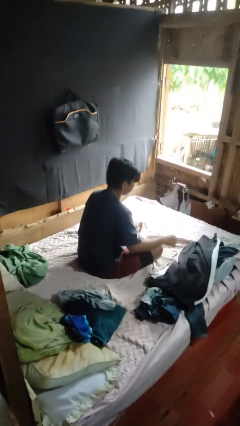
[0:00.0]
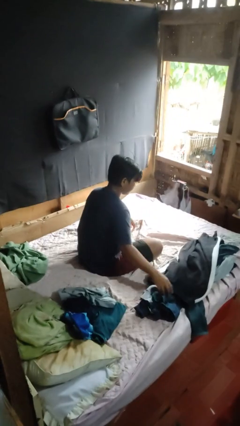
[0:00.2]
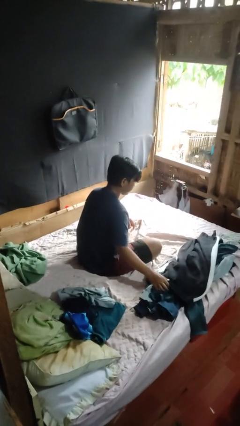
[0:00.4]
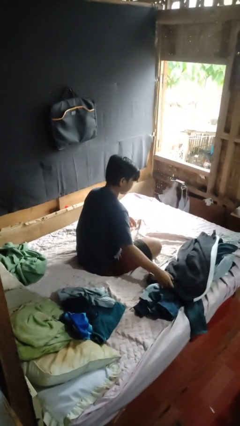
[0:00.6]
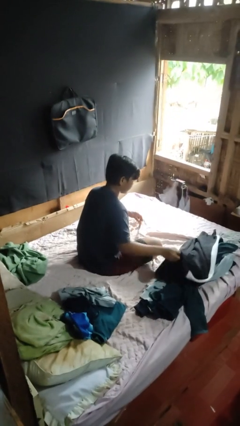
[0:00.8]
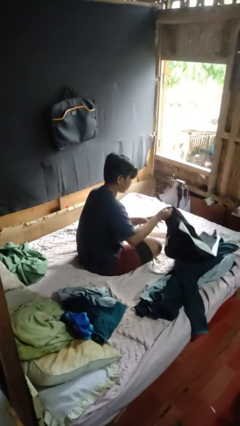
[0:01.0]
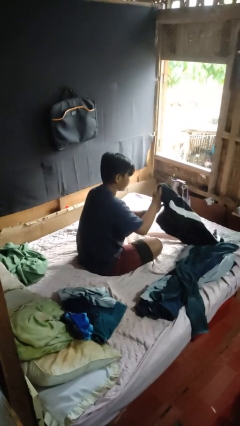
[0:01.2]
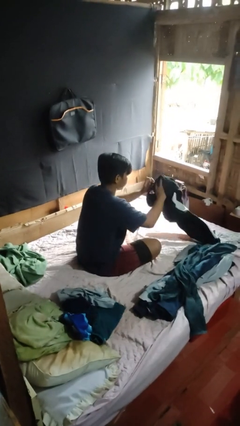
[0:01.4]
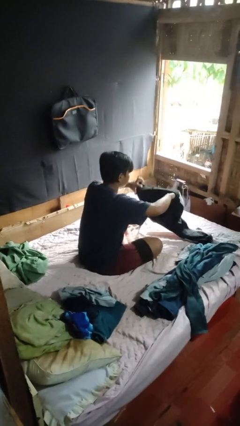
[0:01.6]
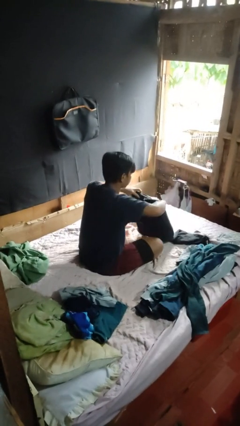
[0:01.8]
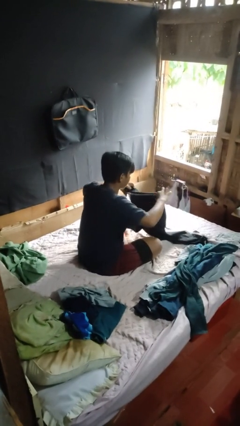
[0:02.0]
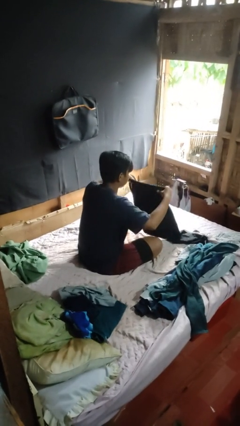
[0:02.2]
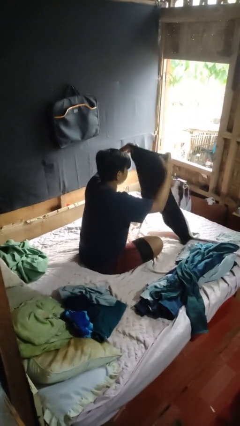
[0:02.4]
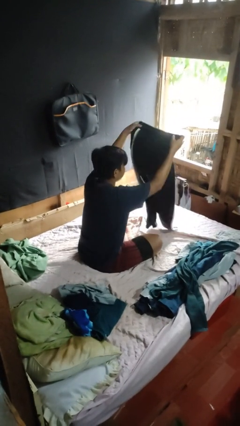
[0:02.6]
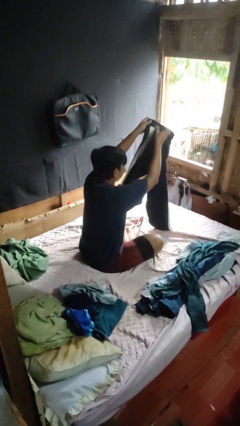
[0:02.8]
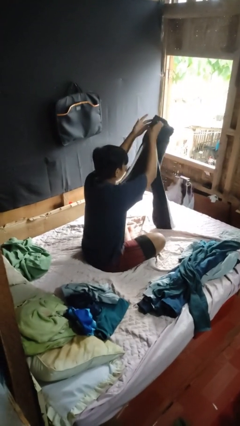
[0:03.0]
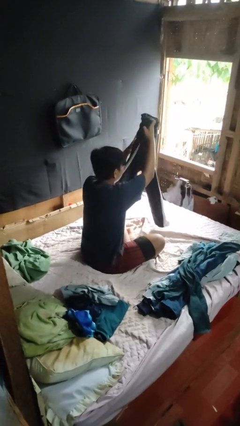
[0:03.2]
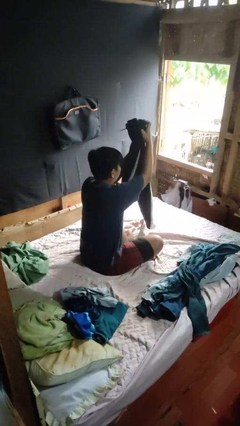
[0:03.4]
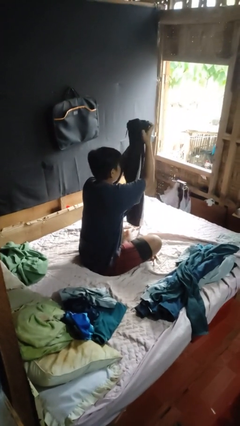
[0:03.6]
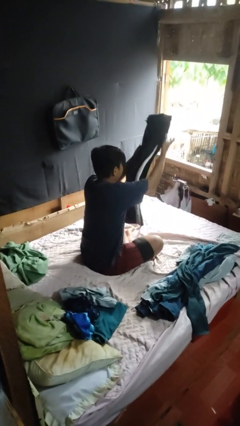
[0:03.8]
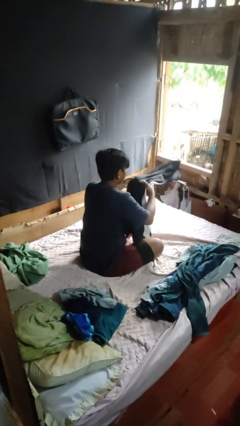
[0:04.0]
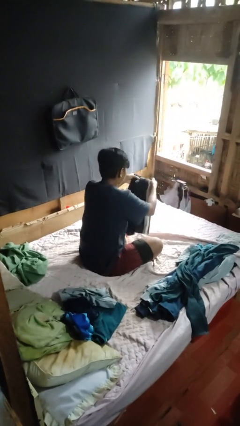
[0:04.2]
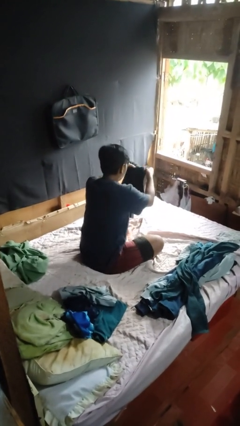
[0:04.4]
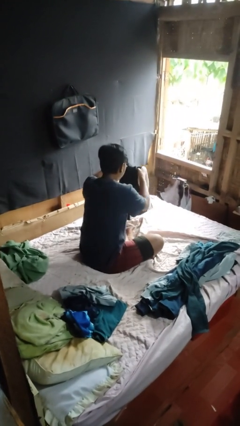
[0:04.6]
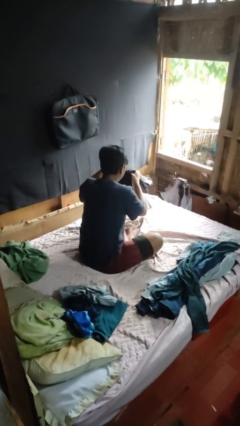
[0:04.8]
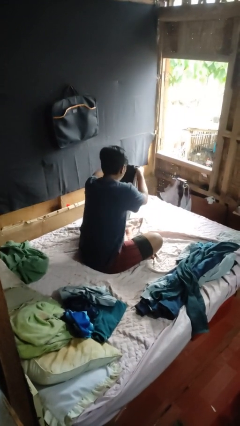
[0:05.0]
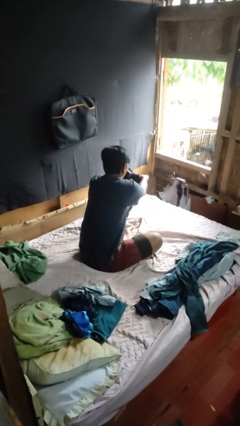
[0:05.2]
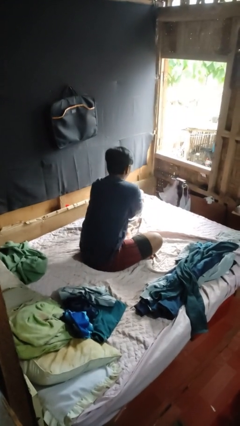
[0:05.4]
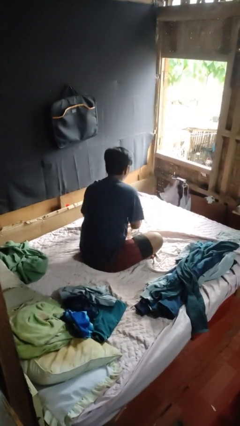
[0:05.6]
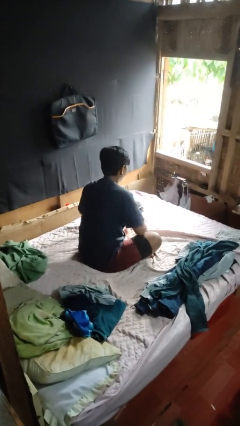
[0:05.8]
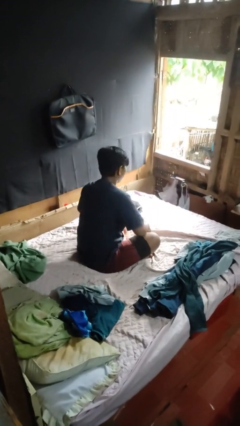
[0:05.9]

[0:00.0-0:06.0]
person folds pants

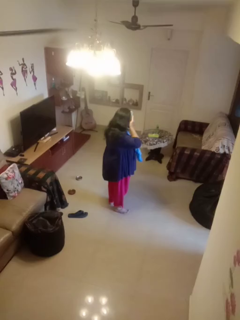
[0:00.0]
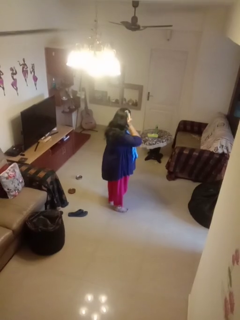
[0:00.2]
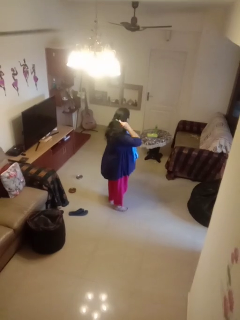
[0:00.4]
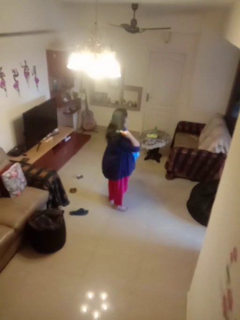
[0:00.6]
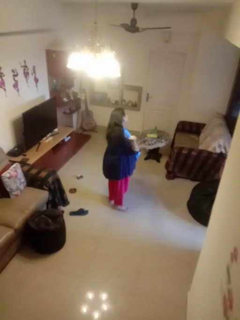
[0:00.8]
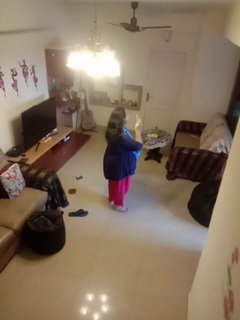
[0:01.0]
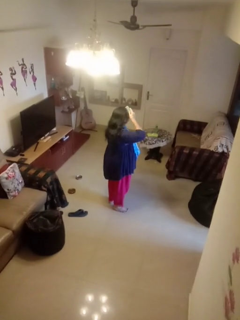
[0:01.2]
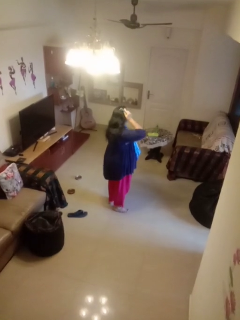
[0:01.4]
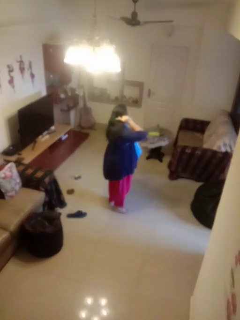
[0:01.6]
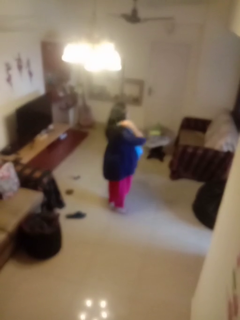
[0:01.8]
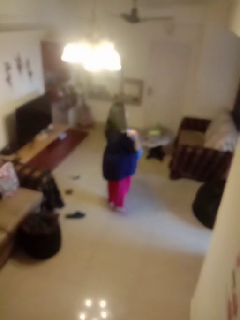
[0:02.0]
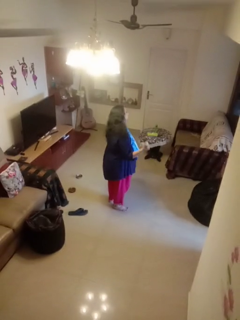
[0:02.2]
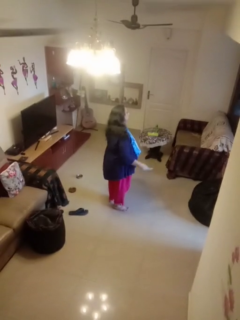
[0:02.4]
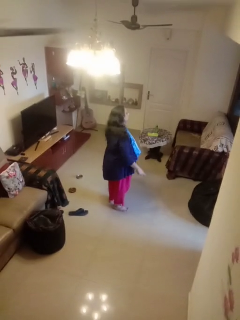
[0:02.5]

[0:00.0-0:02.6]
person brushes hair

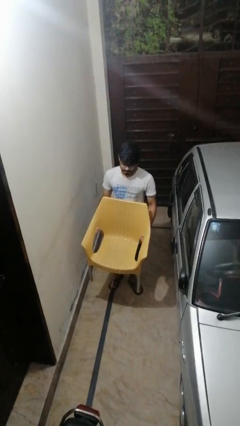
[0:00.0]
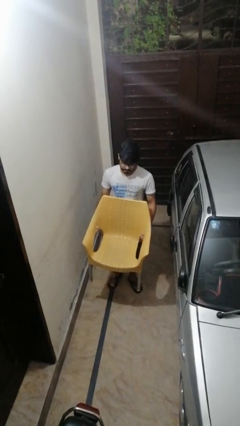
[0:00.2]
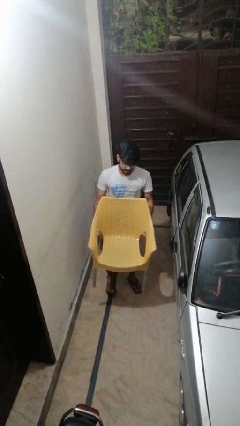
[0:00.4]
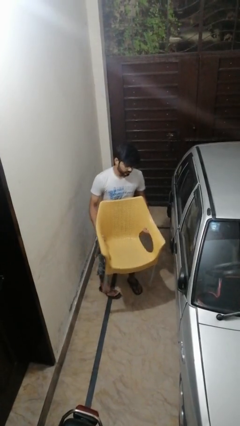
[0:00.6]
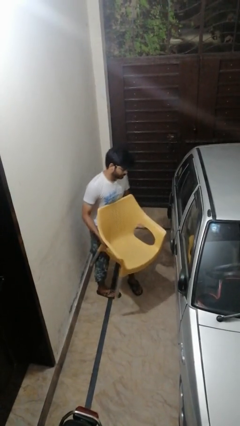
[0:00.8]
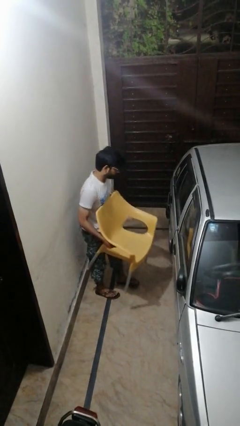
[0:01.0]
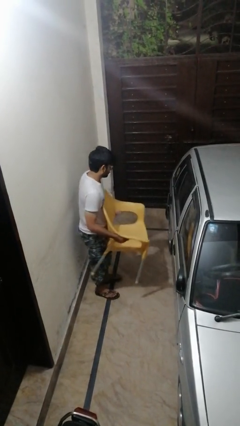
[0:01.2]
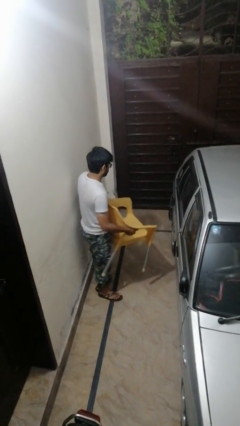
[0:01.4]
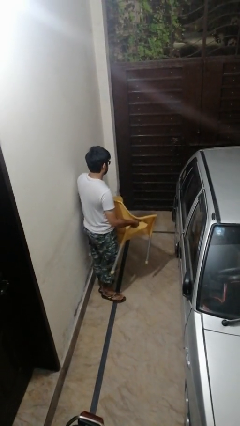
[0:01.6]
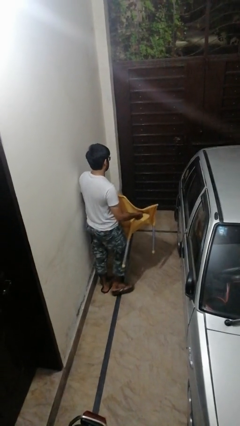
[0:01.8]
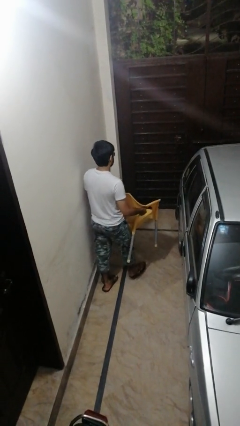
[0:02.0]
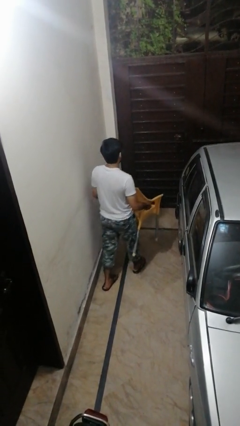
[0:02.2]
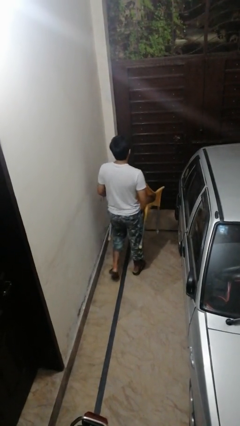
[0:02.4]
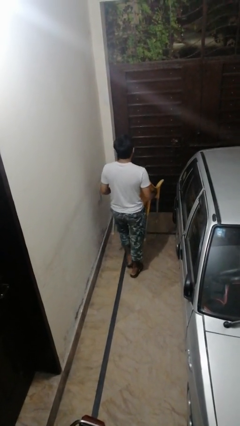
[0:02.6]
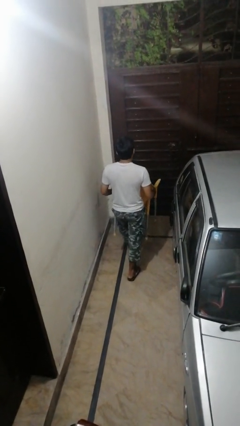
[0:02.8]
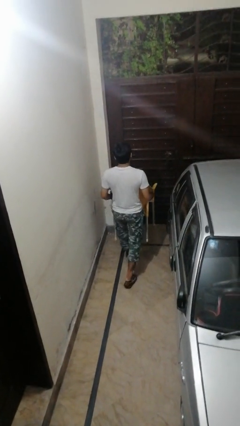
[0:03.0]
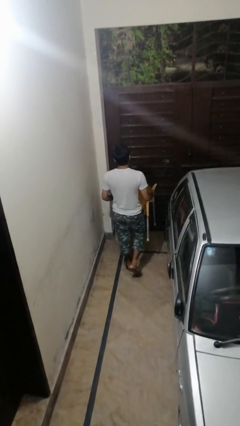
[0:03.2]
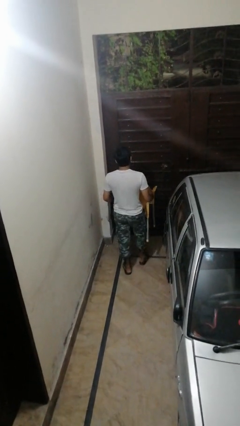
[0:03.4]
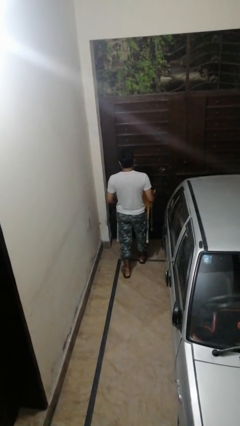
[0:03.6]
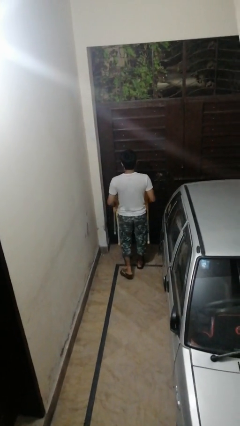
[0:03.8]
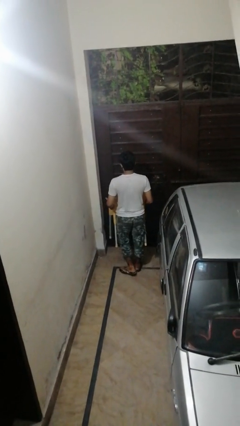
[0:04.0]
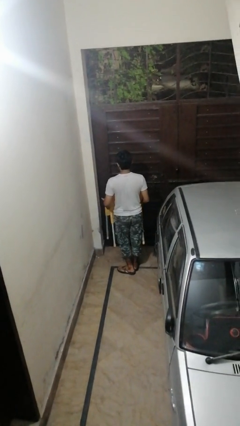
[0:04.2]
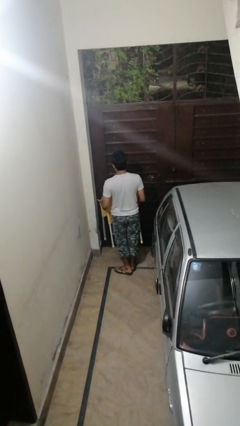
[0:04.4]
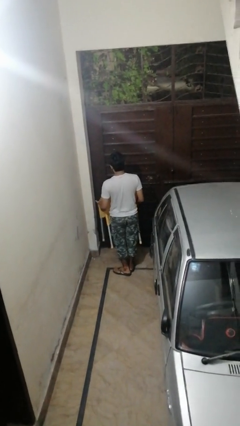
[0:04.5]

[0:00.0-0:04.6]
person carries furniture

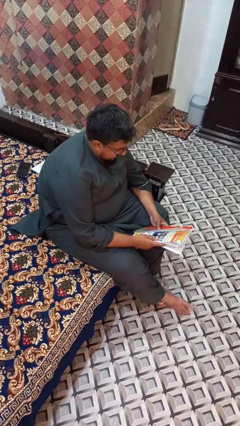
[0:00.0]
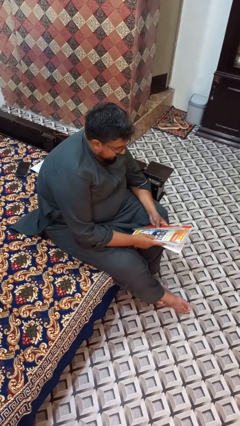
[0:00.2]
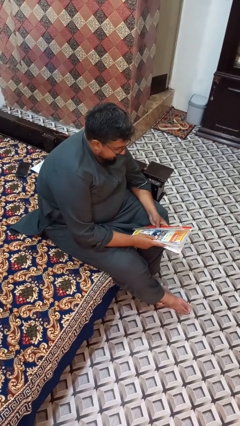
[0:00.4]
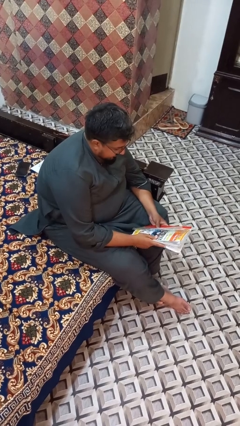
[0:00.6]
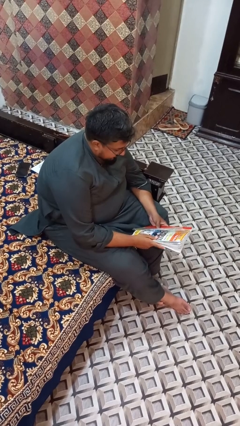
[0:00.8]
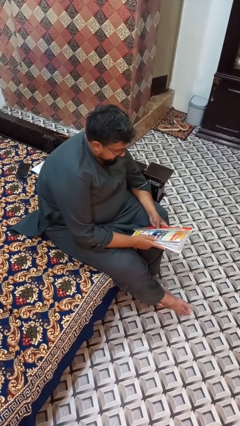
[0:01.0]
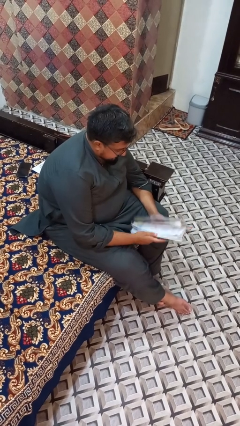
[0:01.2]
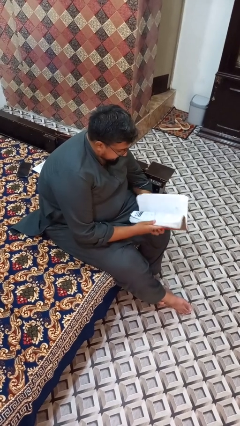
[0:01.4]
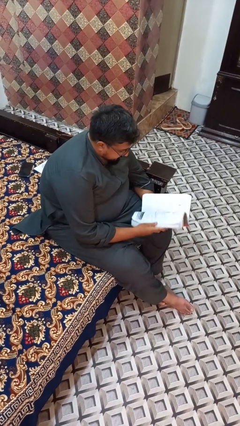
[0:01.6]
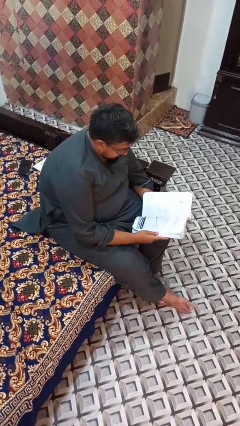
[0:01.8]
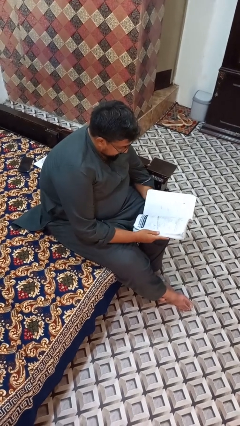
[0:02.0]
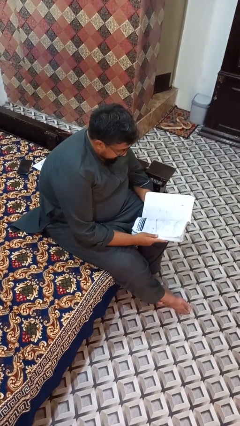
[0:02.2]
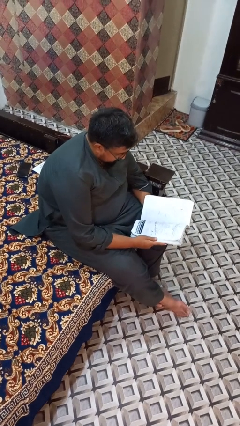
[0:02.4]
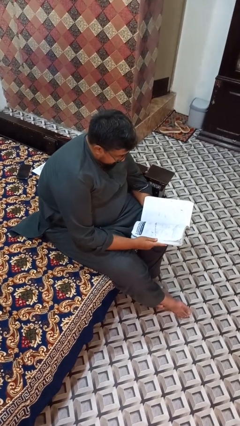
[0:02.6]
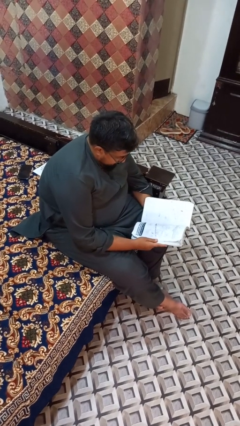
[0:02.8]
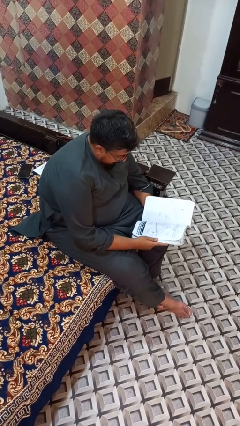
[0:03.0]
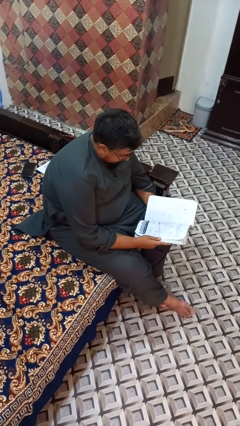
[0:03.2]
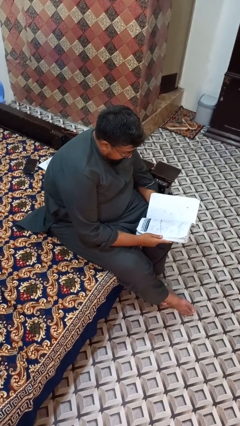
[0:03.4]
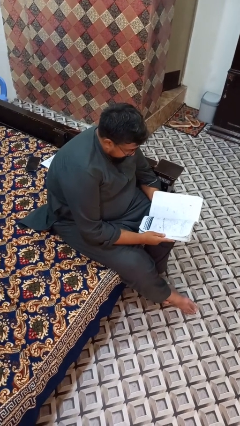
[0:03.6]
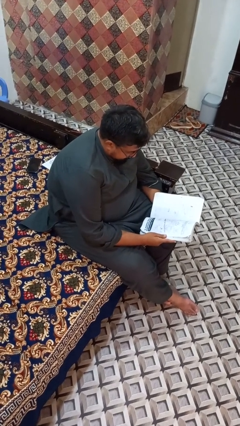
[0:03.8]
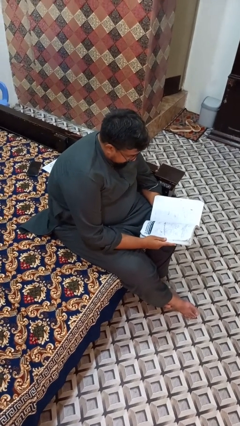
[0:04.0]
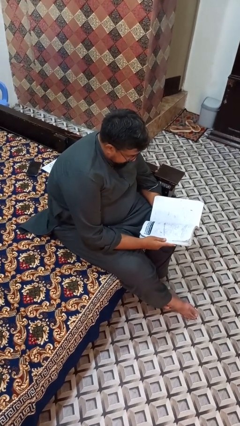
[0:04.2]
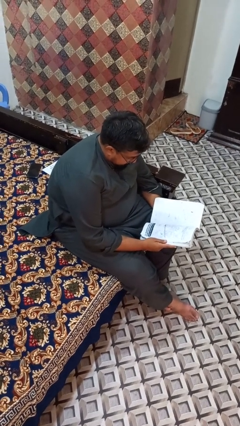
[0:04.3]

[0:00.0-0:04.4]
person reads book

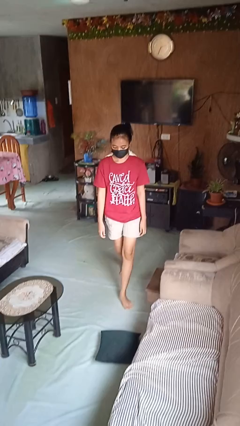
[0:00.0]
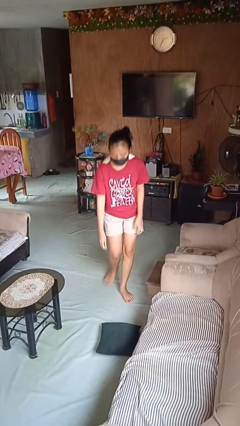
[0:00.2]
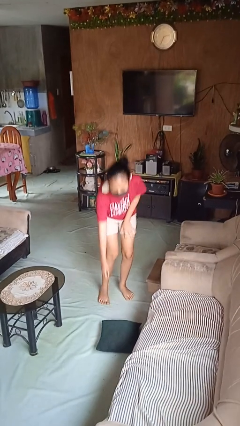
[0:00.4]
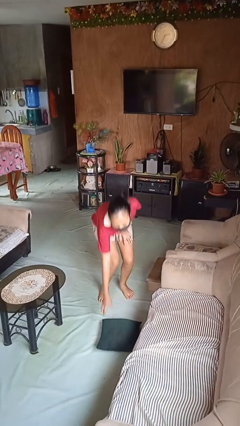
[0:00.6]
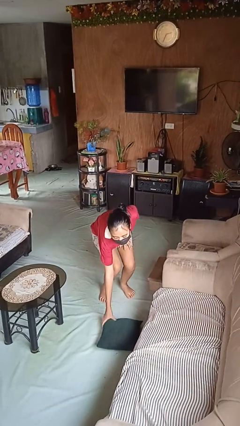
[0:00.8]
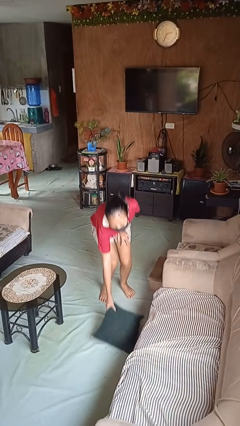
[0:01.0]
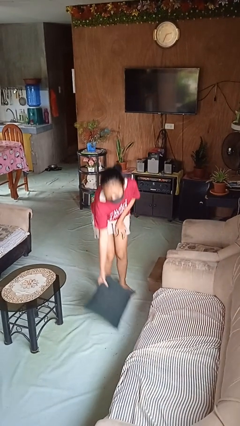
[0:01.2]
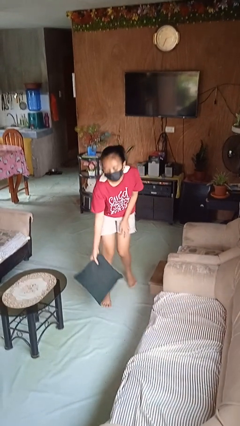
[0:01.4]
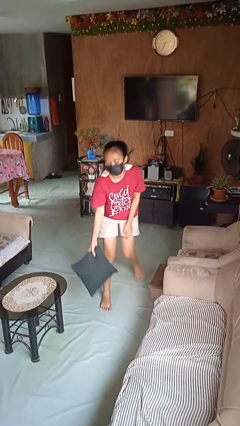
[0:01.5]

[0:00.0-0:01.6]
person picks up object from floor
